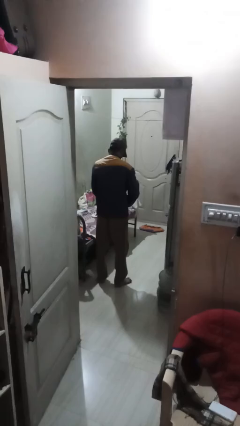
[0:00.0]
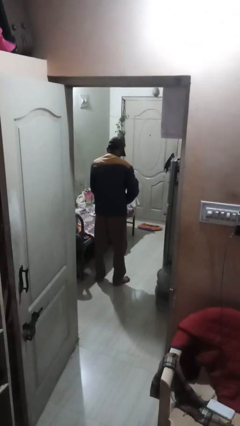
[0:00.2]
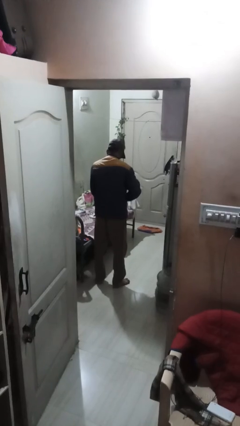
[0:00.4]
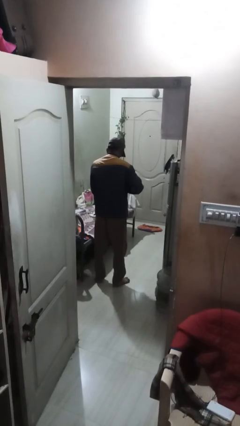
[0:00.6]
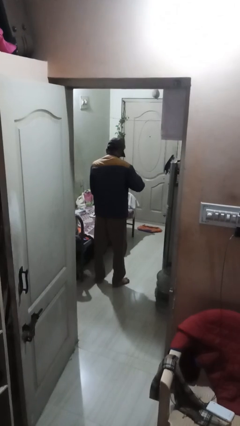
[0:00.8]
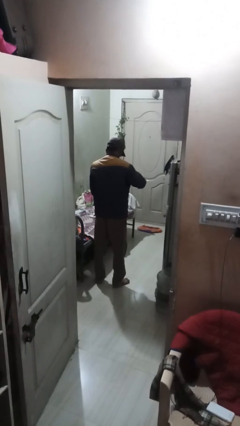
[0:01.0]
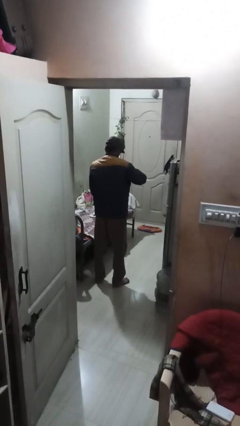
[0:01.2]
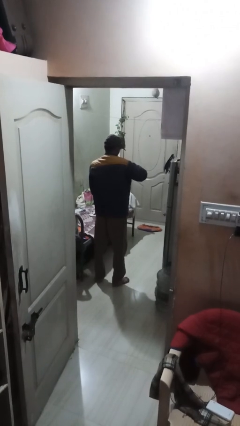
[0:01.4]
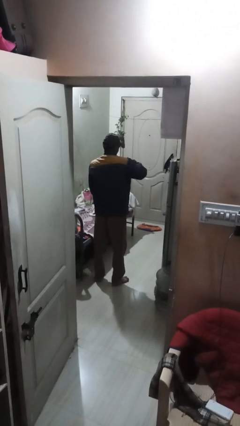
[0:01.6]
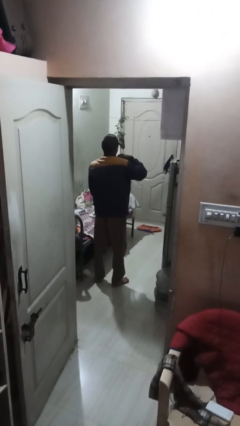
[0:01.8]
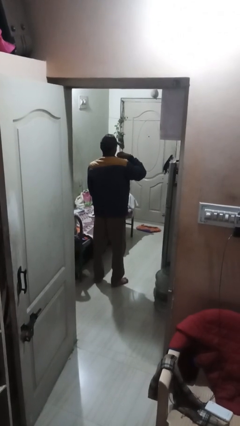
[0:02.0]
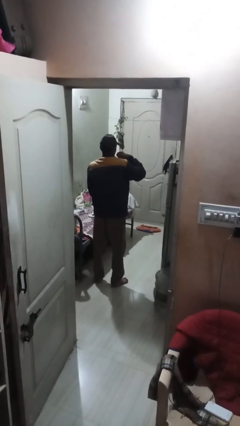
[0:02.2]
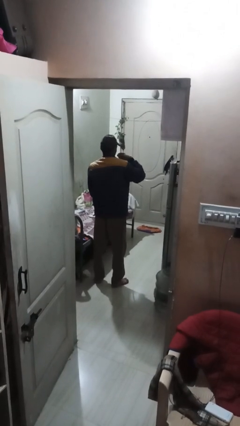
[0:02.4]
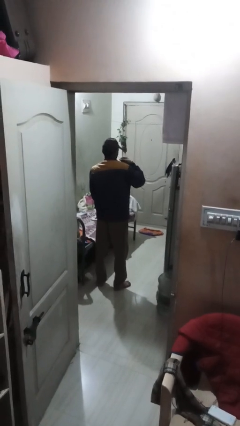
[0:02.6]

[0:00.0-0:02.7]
person zips up jacket

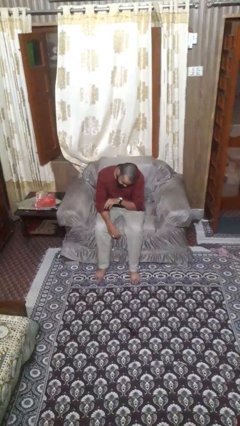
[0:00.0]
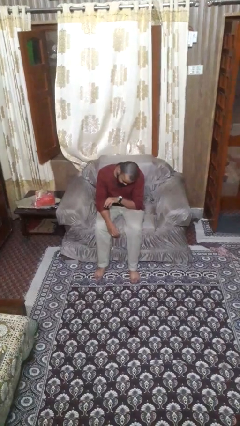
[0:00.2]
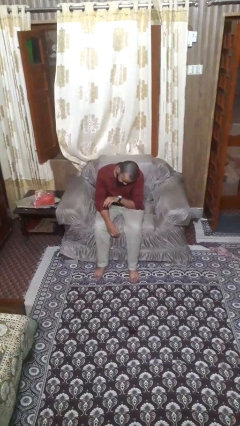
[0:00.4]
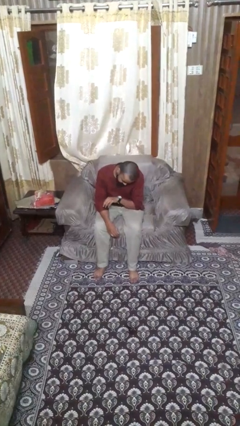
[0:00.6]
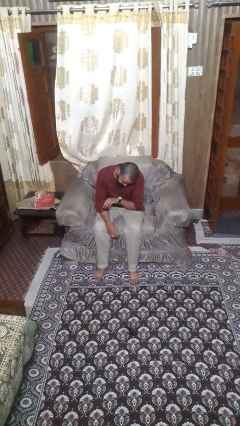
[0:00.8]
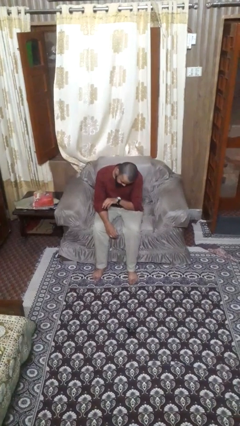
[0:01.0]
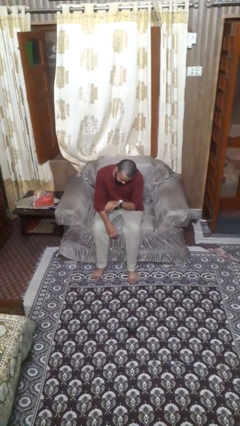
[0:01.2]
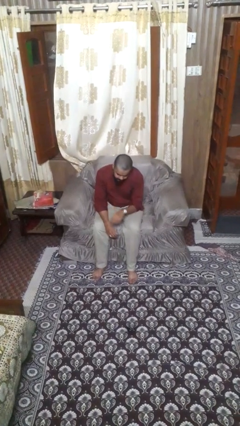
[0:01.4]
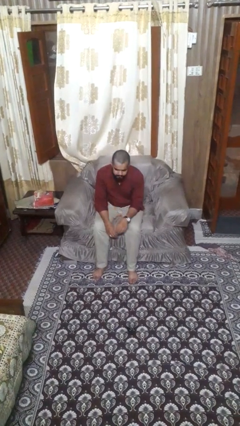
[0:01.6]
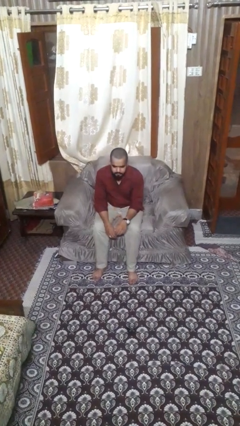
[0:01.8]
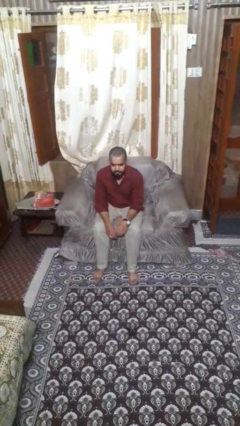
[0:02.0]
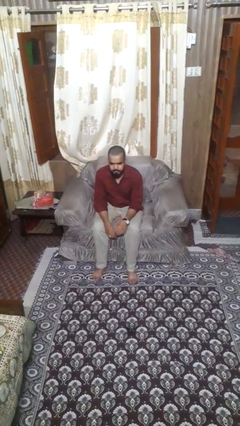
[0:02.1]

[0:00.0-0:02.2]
person looks at wristwatch

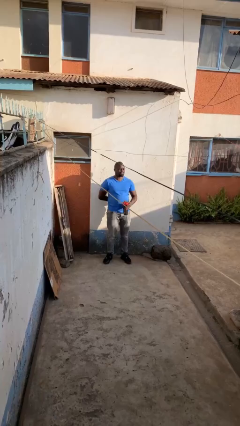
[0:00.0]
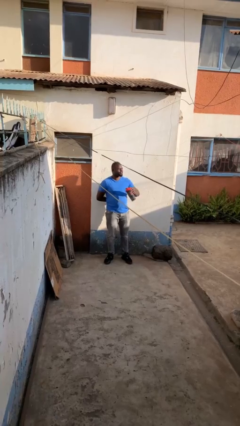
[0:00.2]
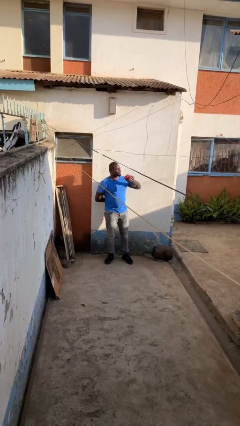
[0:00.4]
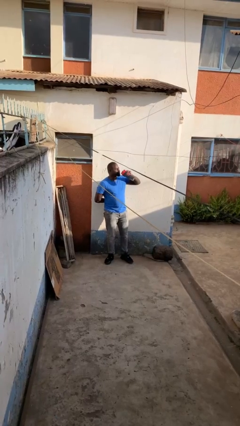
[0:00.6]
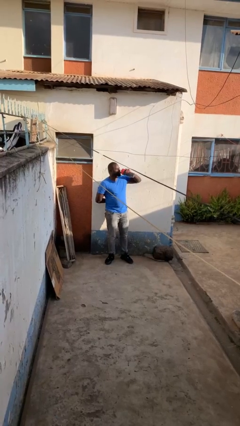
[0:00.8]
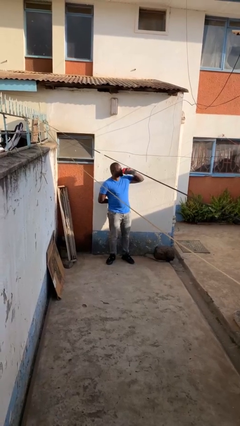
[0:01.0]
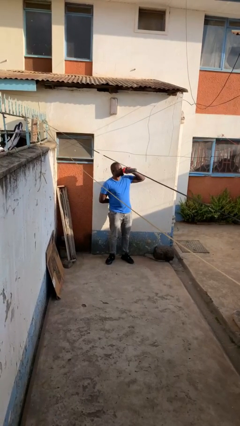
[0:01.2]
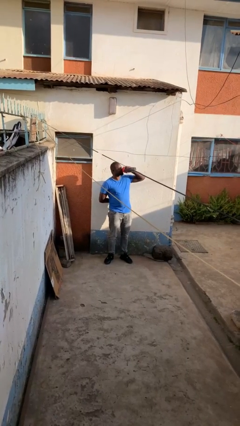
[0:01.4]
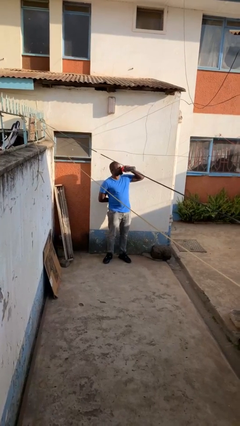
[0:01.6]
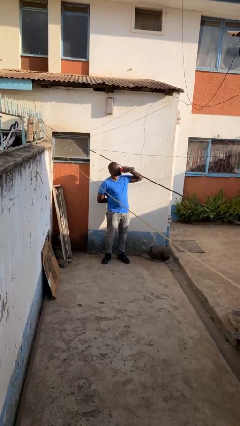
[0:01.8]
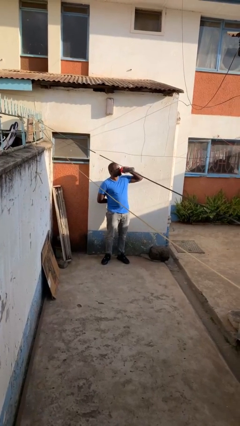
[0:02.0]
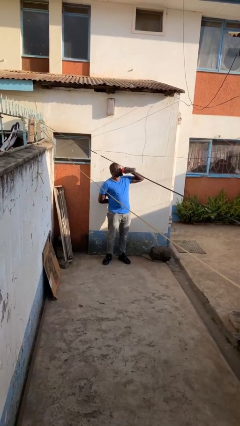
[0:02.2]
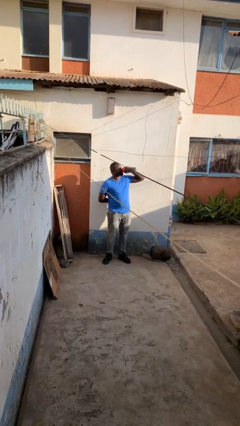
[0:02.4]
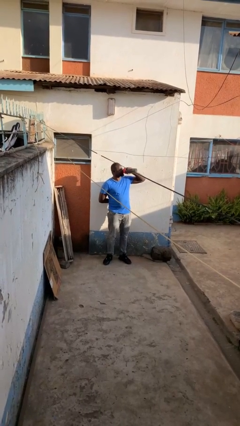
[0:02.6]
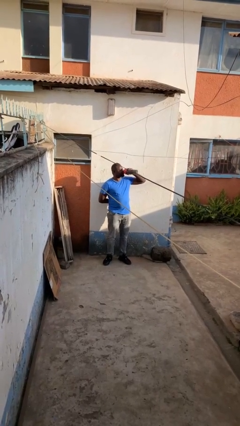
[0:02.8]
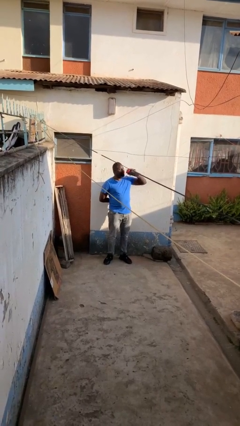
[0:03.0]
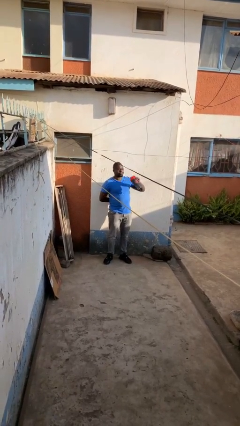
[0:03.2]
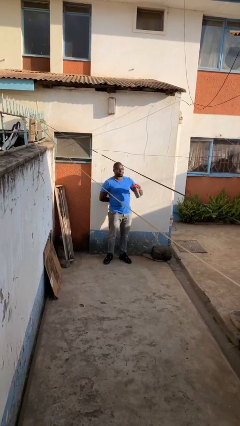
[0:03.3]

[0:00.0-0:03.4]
person drinks from bottle

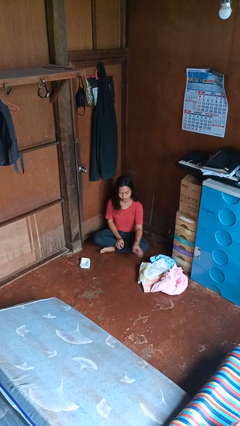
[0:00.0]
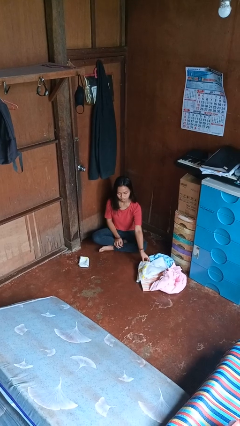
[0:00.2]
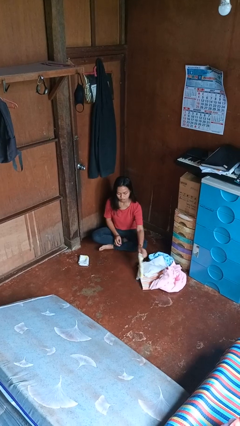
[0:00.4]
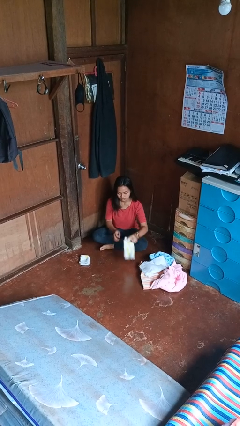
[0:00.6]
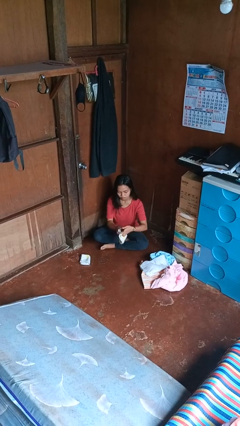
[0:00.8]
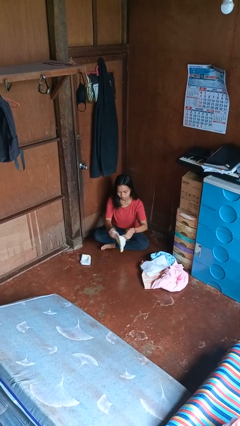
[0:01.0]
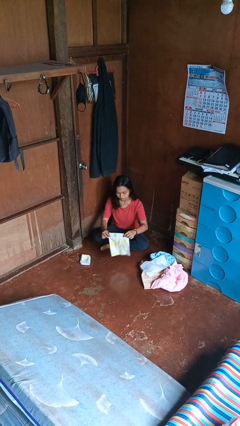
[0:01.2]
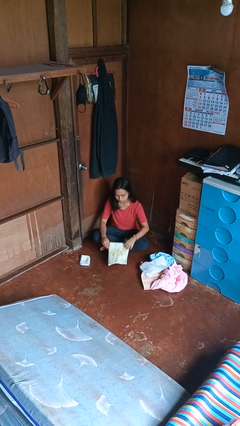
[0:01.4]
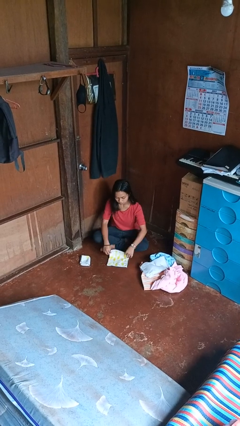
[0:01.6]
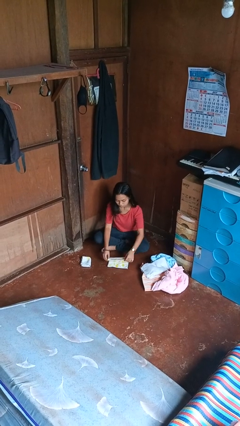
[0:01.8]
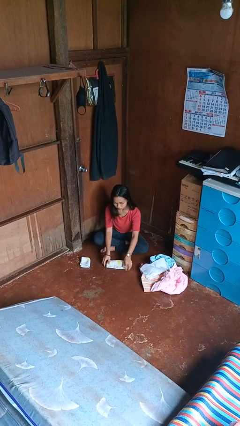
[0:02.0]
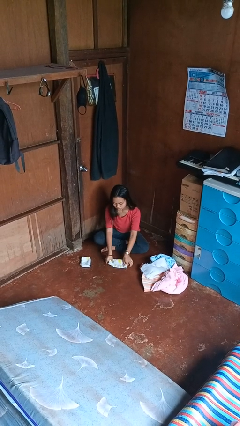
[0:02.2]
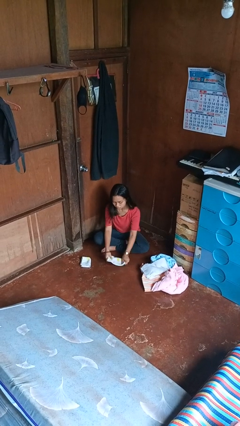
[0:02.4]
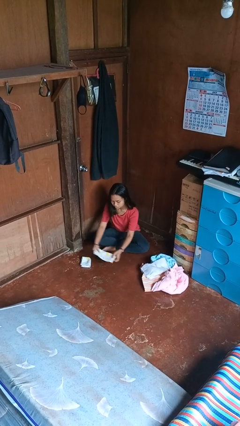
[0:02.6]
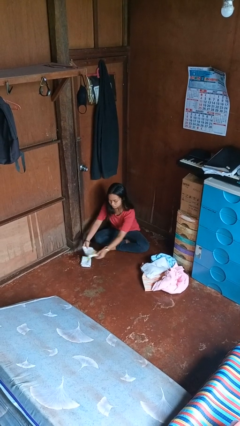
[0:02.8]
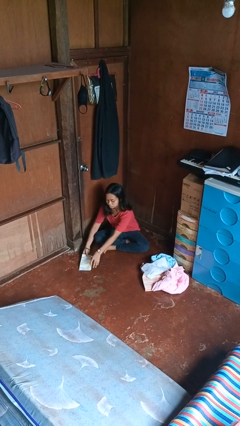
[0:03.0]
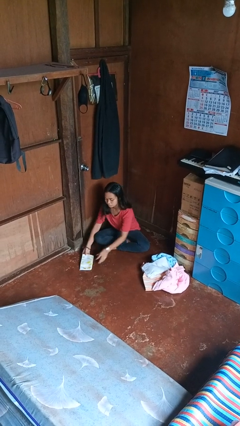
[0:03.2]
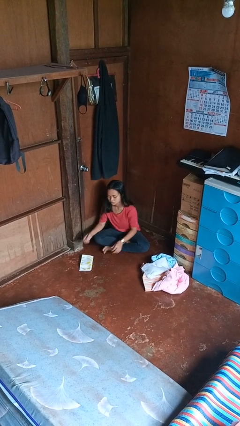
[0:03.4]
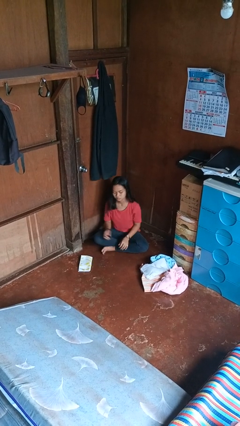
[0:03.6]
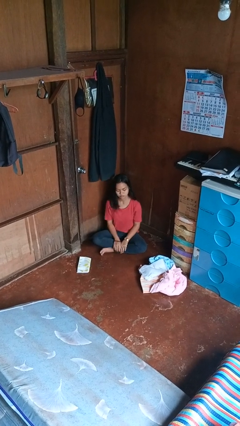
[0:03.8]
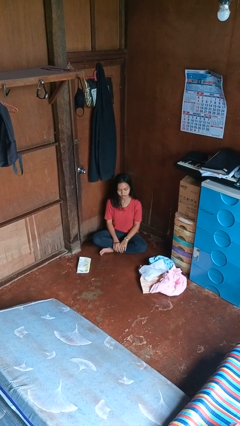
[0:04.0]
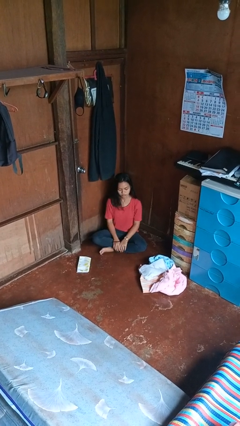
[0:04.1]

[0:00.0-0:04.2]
person folds towel

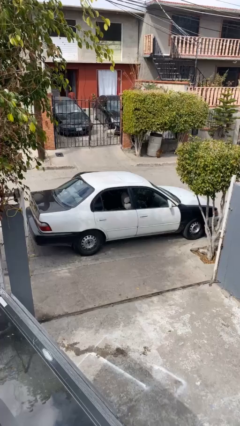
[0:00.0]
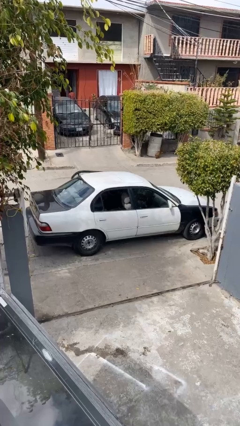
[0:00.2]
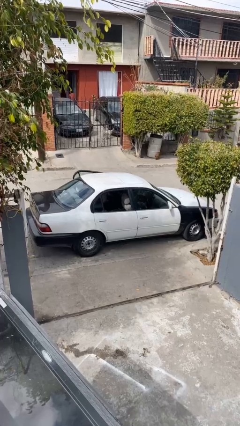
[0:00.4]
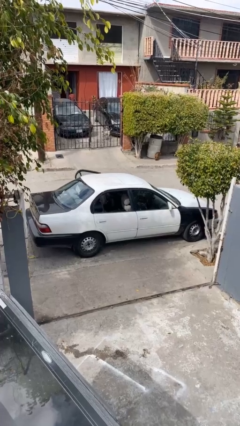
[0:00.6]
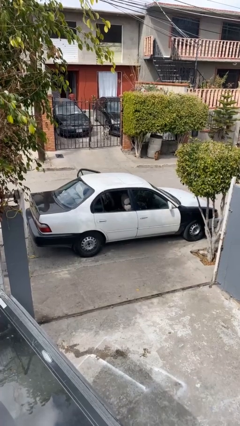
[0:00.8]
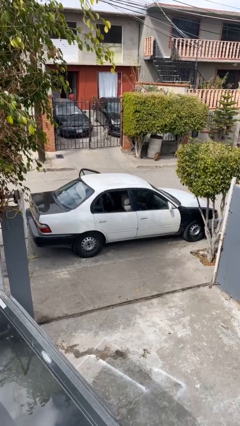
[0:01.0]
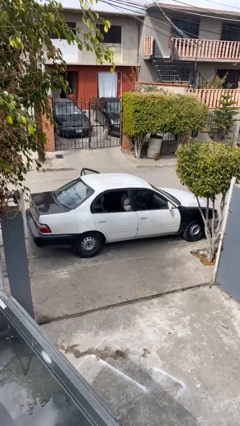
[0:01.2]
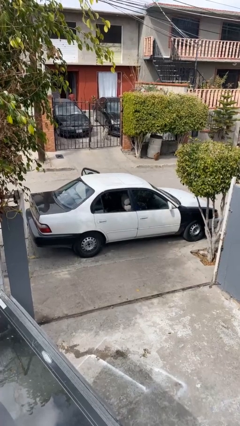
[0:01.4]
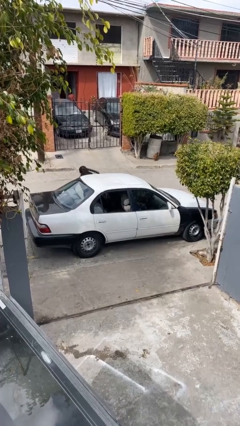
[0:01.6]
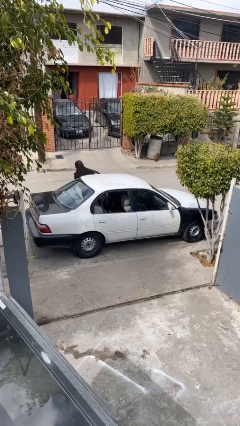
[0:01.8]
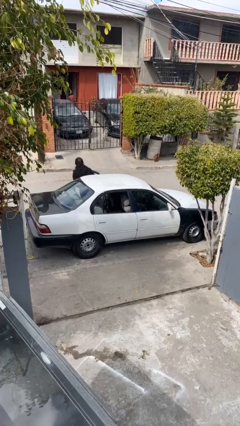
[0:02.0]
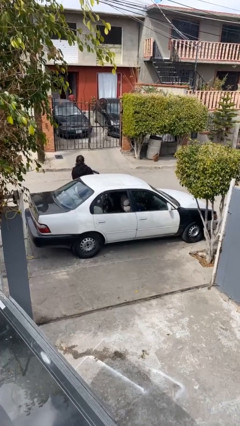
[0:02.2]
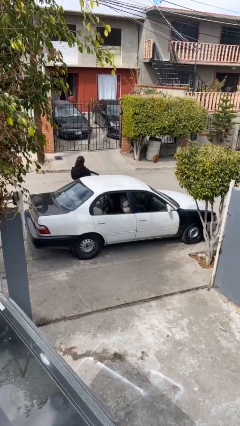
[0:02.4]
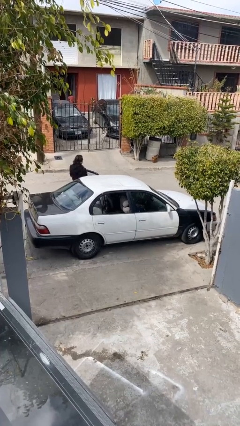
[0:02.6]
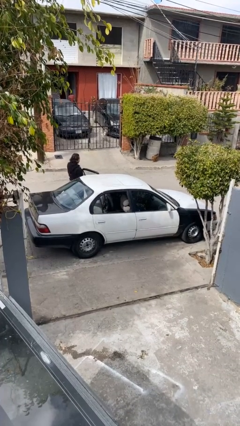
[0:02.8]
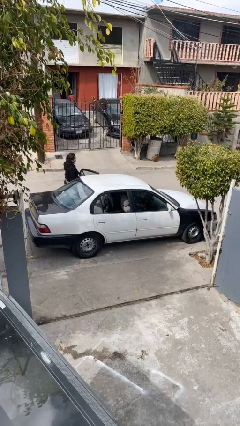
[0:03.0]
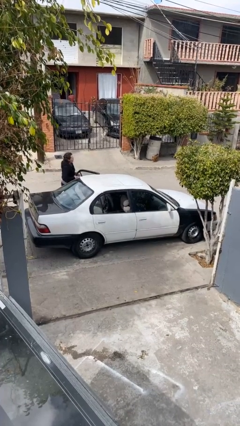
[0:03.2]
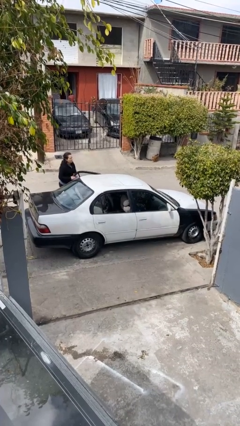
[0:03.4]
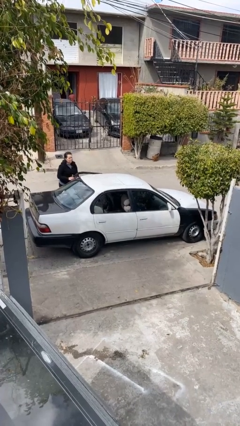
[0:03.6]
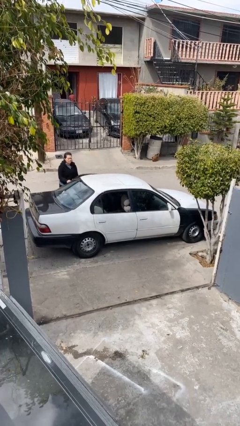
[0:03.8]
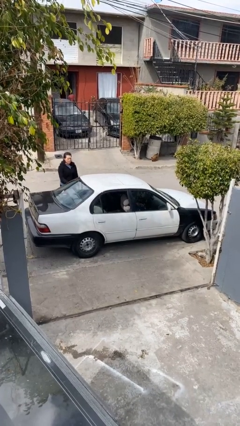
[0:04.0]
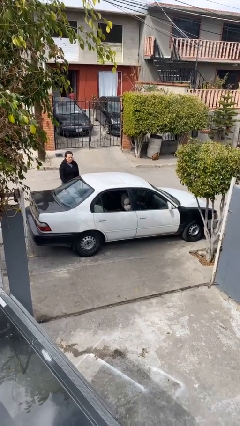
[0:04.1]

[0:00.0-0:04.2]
car drops off person

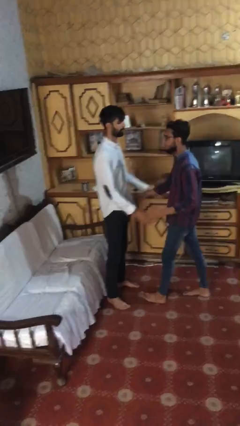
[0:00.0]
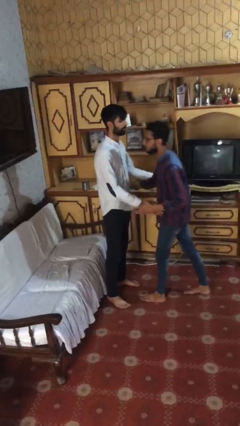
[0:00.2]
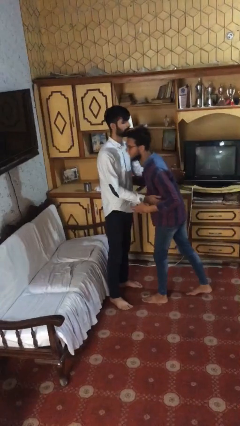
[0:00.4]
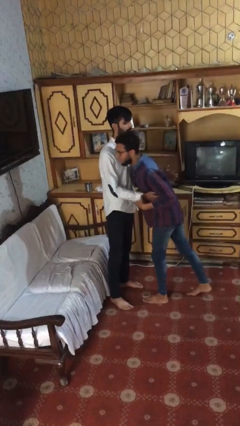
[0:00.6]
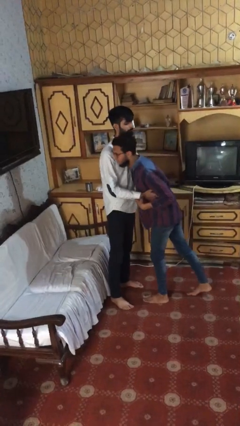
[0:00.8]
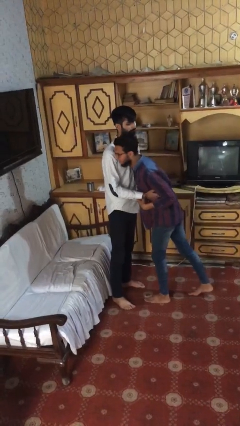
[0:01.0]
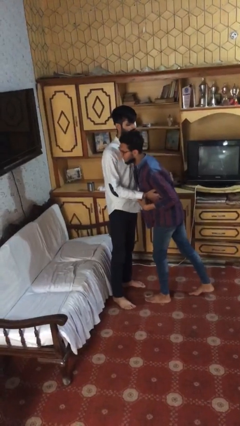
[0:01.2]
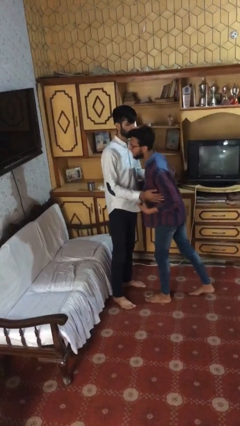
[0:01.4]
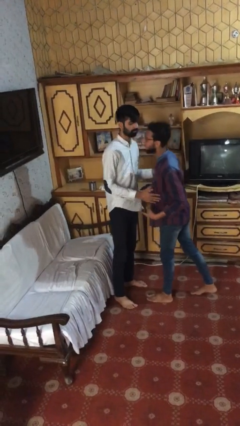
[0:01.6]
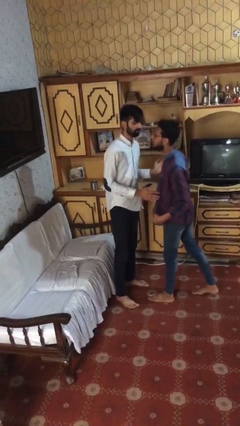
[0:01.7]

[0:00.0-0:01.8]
person embraces person
